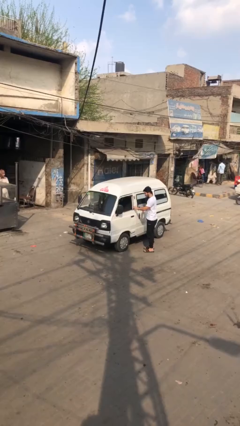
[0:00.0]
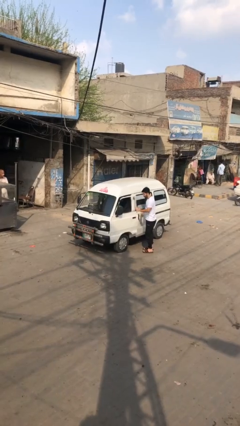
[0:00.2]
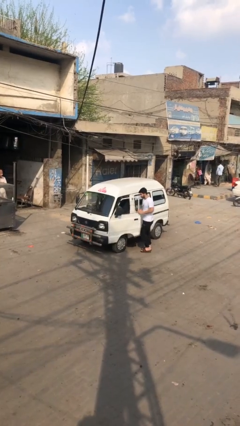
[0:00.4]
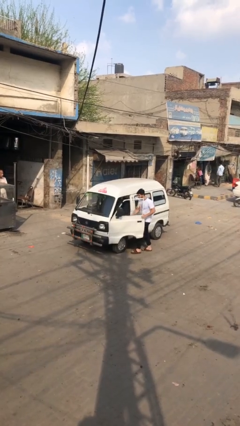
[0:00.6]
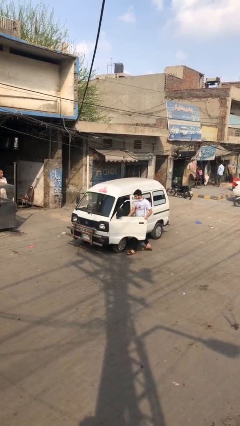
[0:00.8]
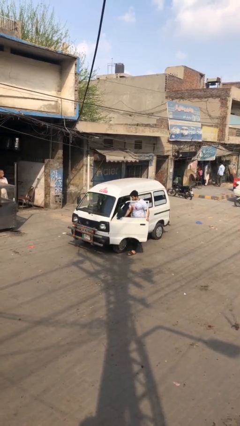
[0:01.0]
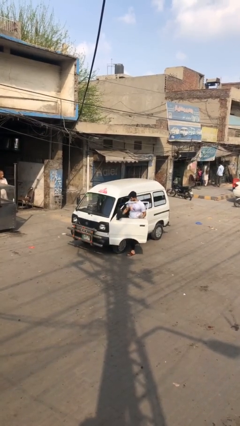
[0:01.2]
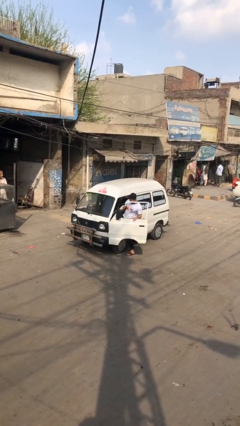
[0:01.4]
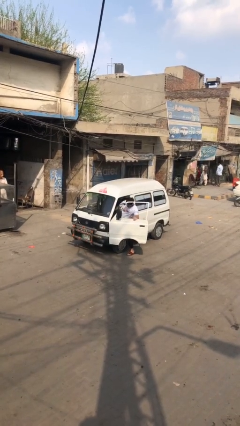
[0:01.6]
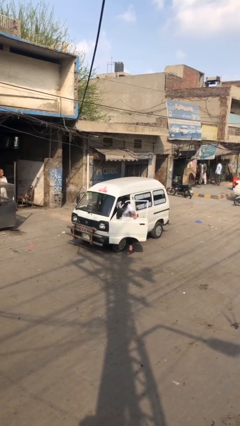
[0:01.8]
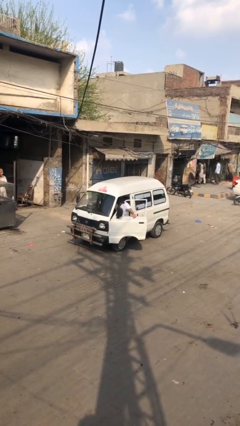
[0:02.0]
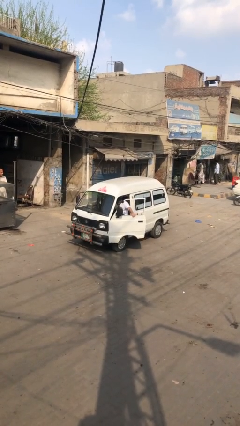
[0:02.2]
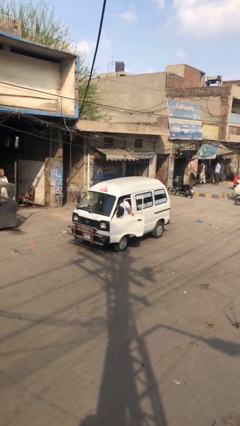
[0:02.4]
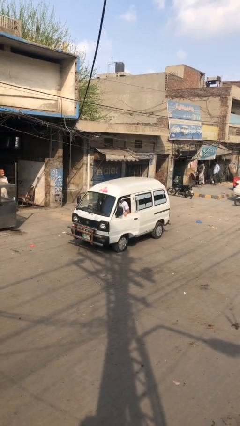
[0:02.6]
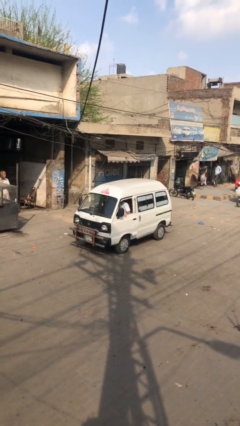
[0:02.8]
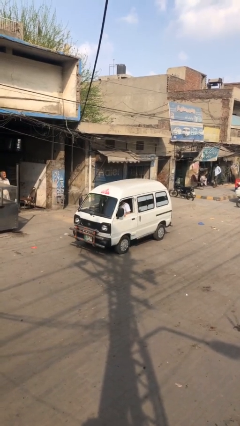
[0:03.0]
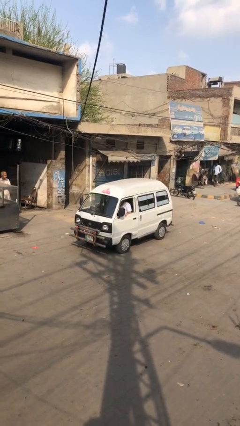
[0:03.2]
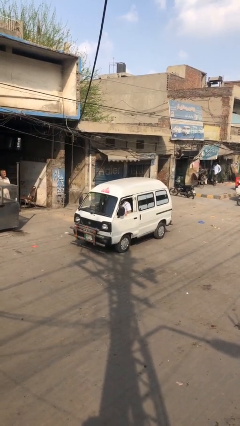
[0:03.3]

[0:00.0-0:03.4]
car picks up person

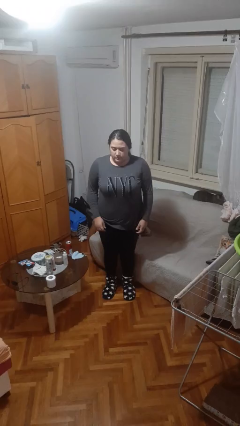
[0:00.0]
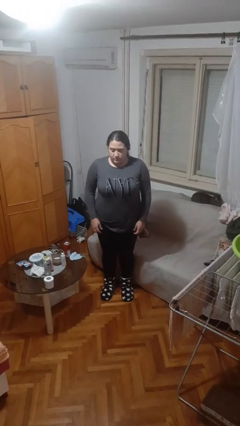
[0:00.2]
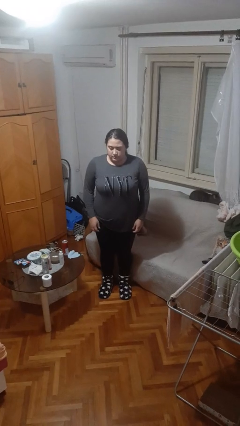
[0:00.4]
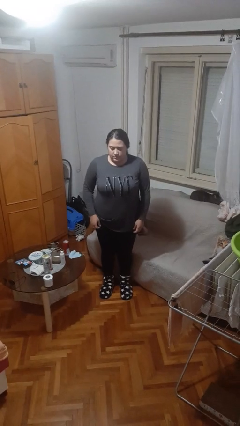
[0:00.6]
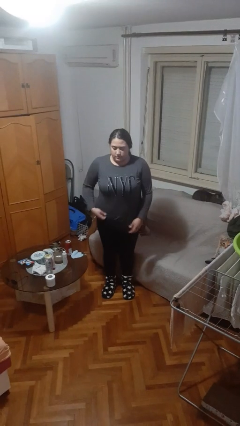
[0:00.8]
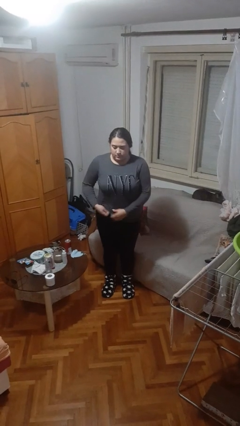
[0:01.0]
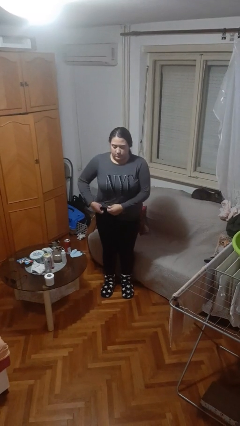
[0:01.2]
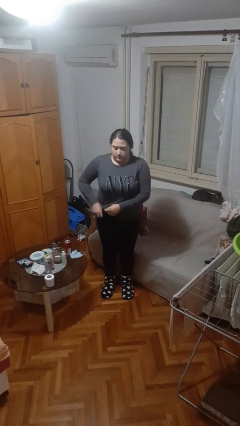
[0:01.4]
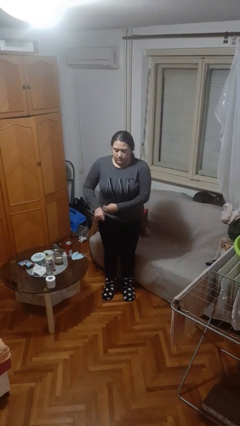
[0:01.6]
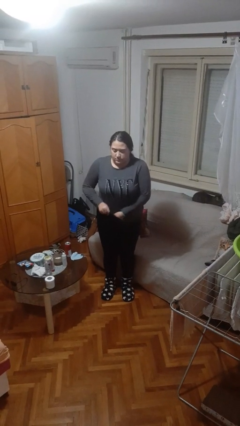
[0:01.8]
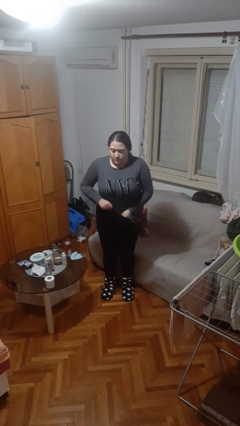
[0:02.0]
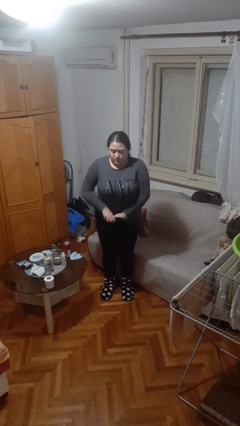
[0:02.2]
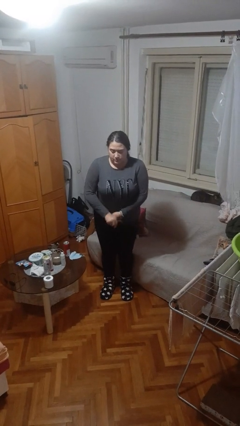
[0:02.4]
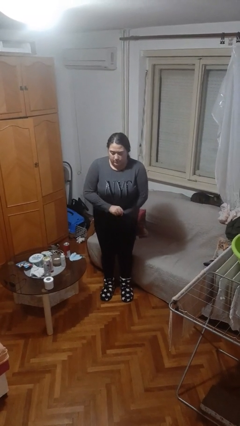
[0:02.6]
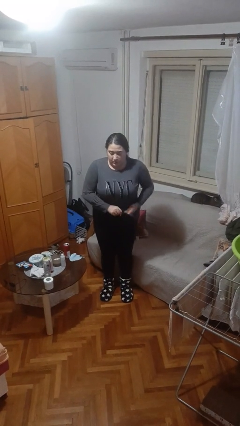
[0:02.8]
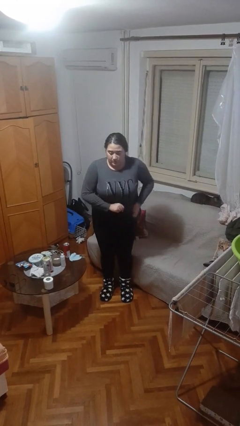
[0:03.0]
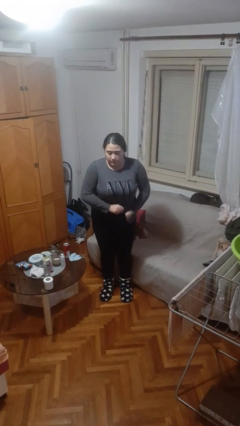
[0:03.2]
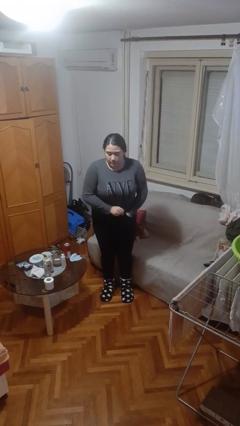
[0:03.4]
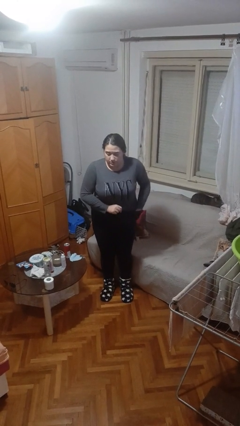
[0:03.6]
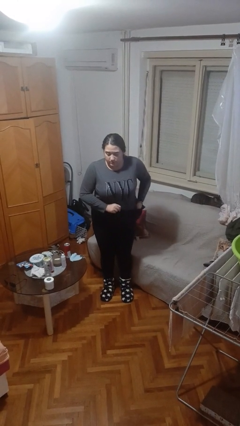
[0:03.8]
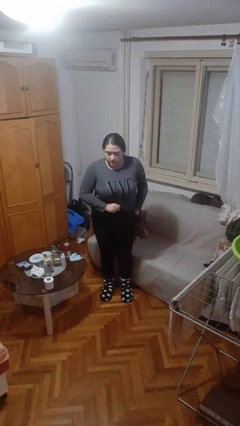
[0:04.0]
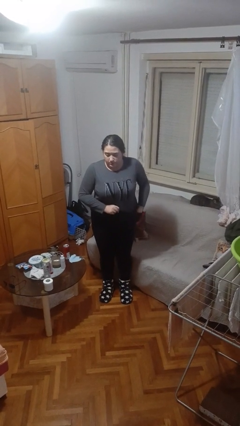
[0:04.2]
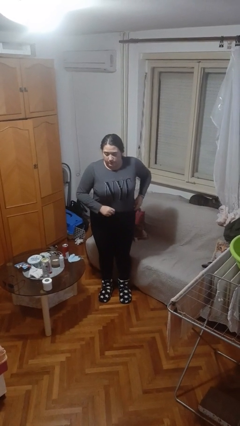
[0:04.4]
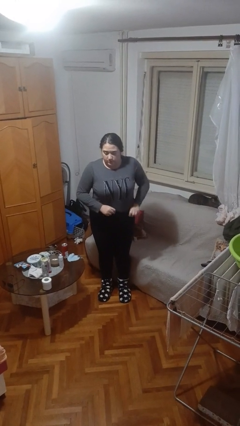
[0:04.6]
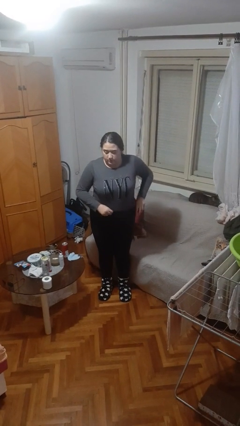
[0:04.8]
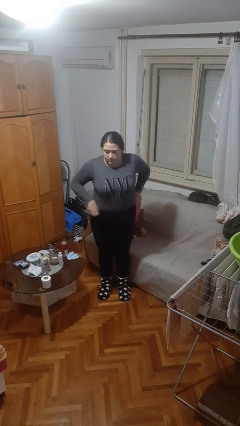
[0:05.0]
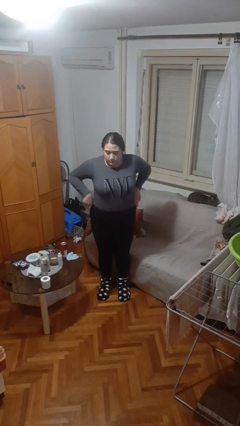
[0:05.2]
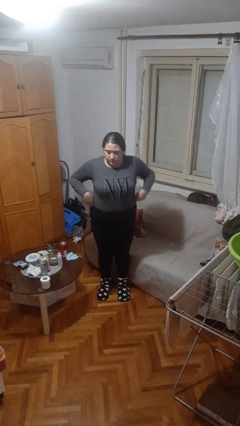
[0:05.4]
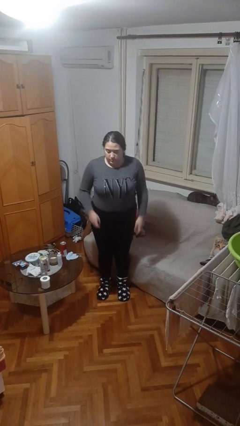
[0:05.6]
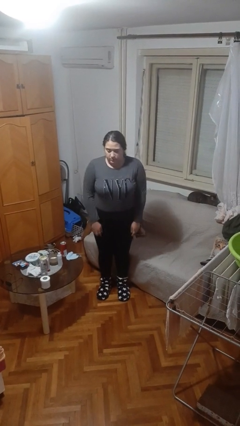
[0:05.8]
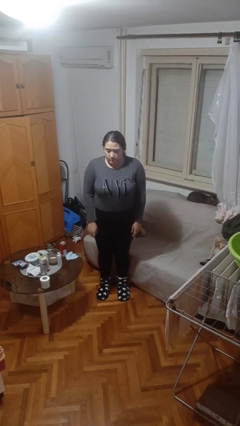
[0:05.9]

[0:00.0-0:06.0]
person tucks in shirt

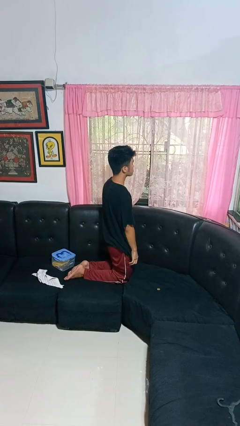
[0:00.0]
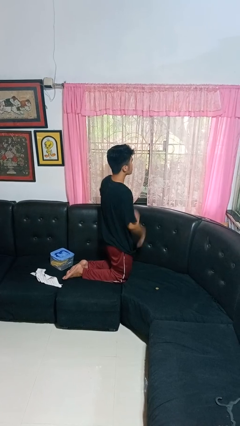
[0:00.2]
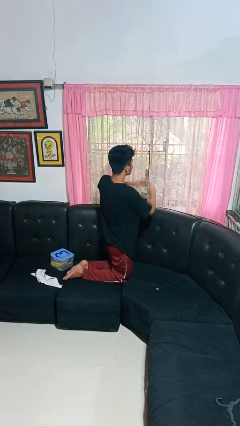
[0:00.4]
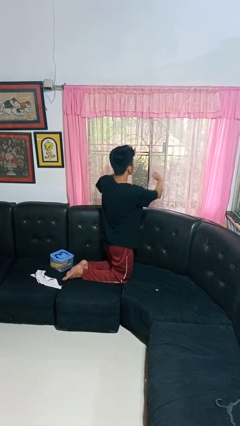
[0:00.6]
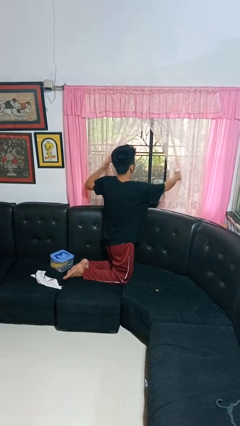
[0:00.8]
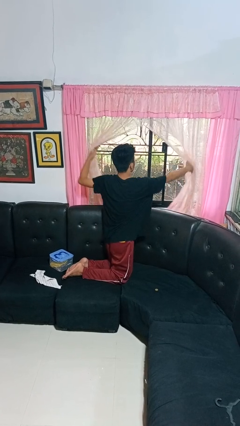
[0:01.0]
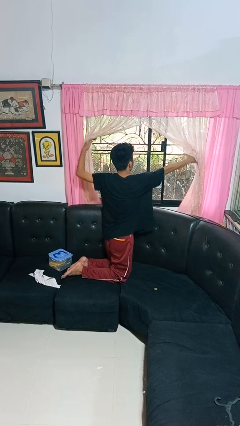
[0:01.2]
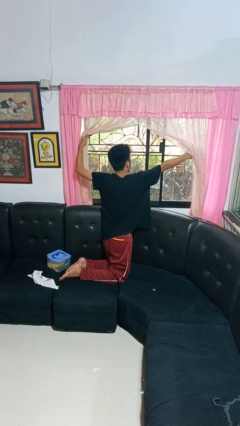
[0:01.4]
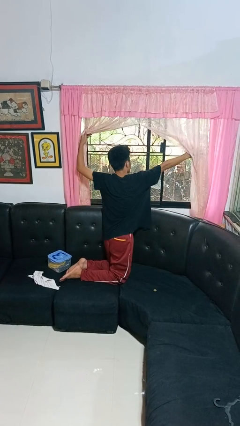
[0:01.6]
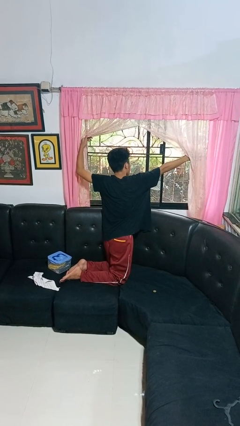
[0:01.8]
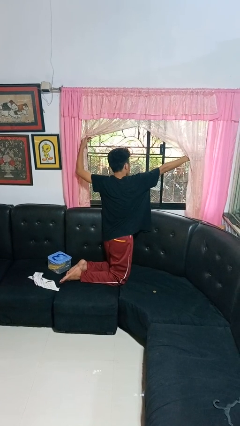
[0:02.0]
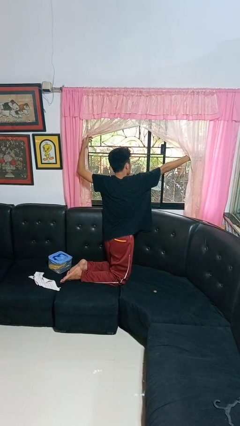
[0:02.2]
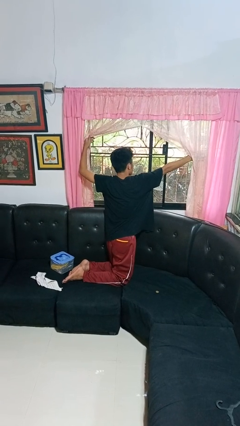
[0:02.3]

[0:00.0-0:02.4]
person opens curtains

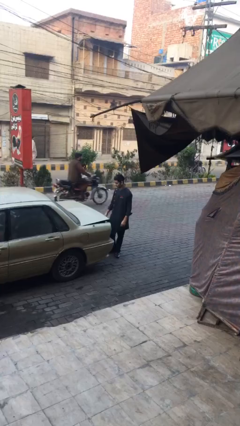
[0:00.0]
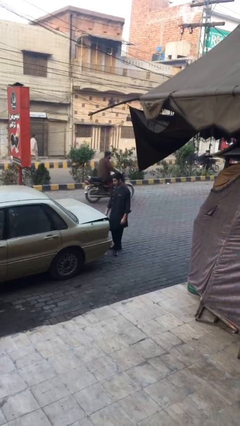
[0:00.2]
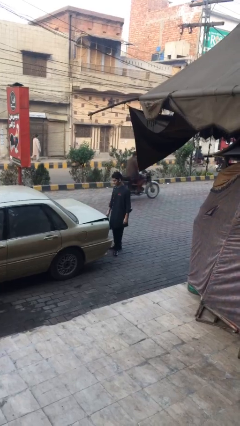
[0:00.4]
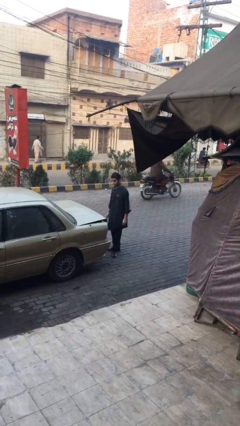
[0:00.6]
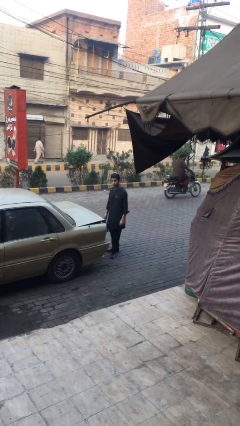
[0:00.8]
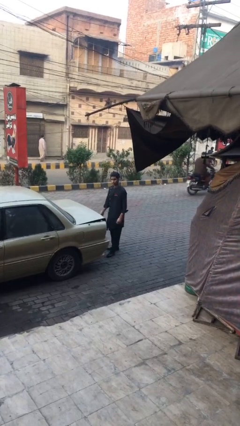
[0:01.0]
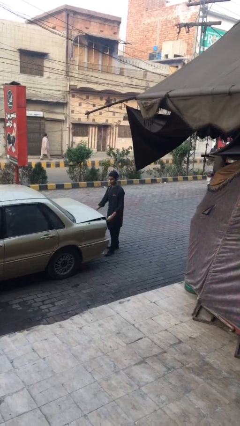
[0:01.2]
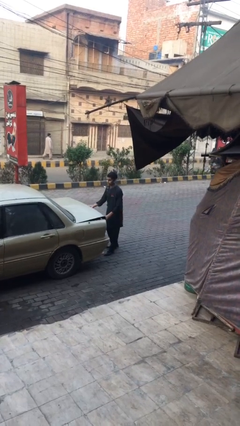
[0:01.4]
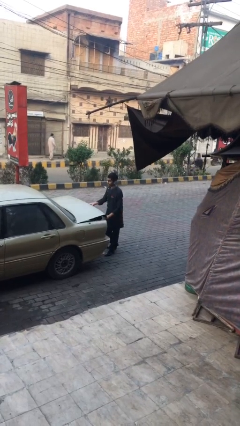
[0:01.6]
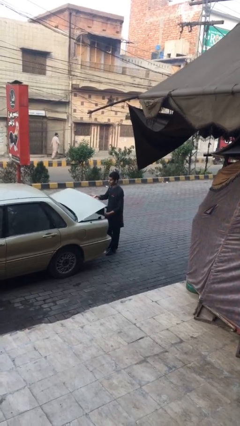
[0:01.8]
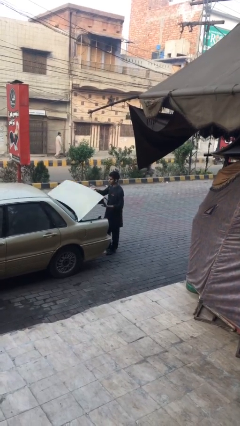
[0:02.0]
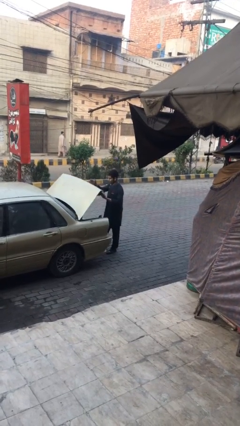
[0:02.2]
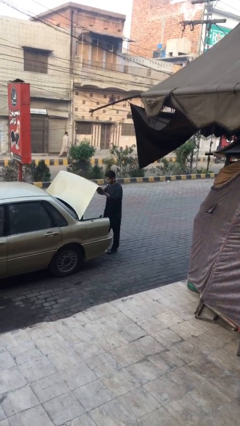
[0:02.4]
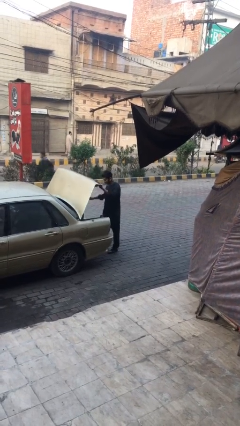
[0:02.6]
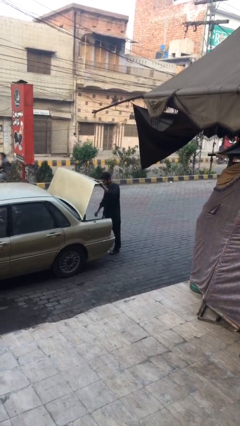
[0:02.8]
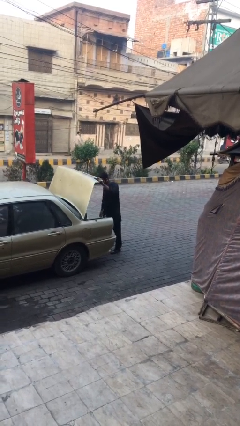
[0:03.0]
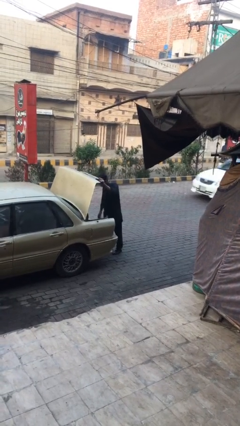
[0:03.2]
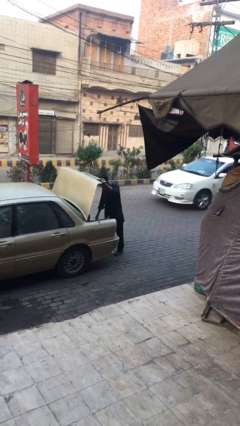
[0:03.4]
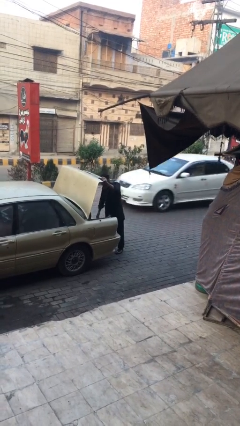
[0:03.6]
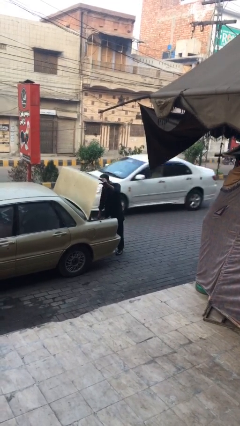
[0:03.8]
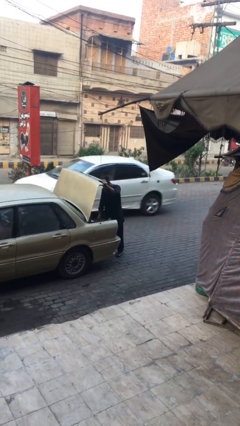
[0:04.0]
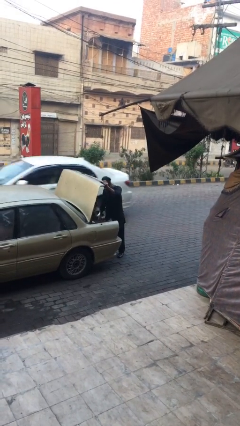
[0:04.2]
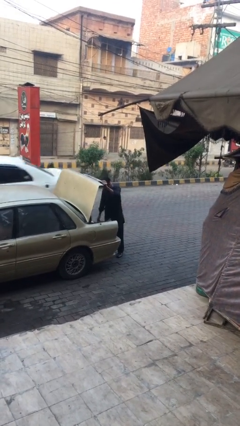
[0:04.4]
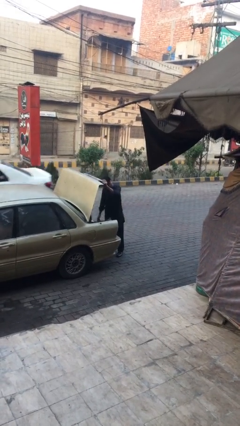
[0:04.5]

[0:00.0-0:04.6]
person opens car trunk

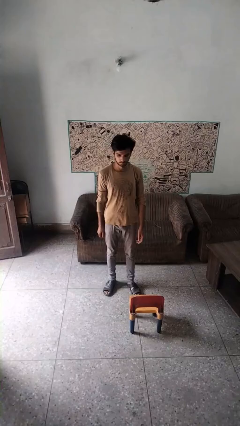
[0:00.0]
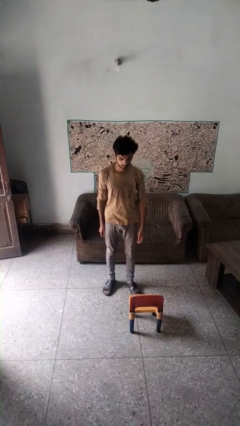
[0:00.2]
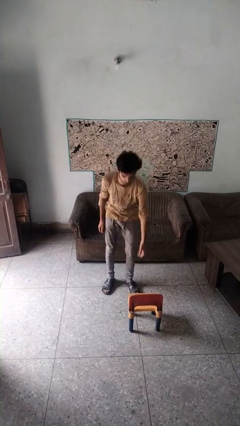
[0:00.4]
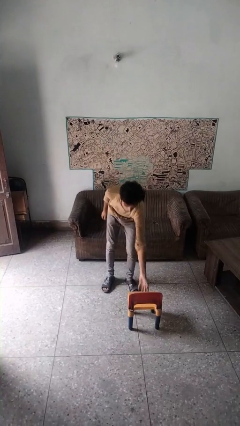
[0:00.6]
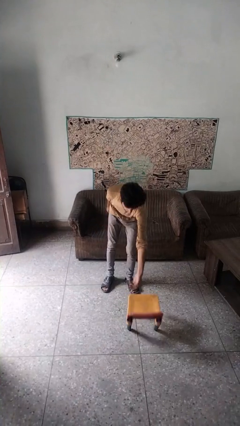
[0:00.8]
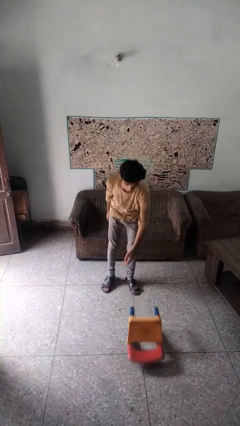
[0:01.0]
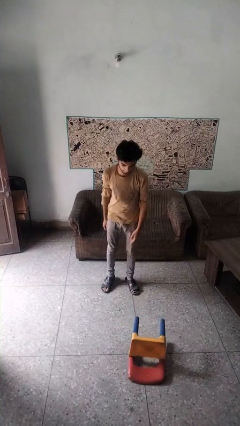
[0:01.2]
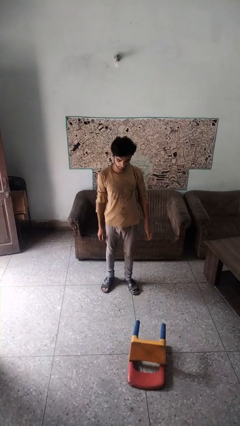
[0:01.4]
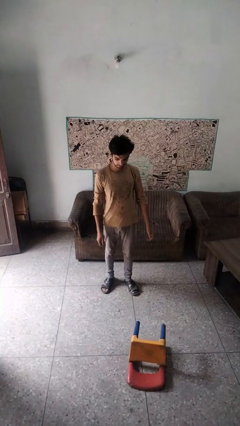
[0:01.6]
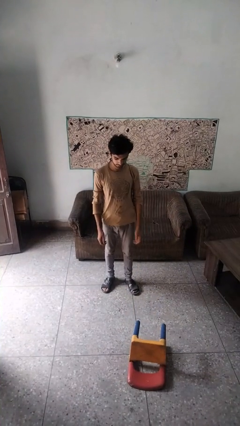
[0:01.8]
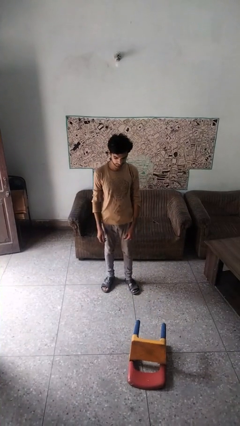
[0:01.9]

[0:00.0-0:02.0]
person knocks over furniture
